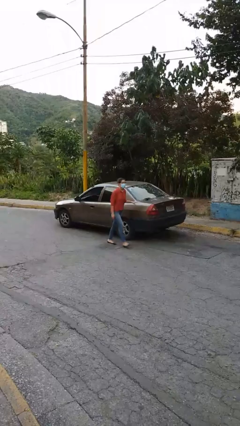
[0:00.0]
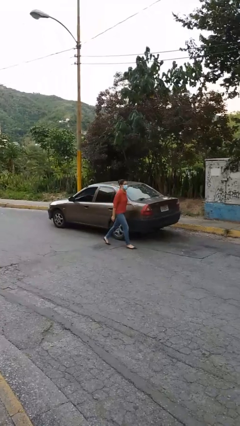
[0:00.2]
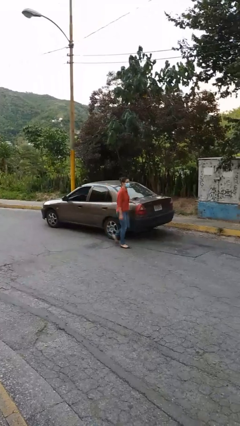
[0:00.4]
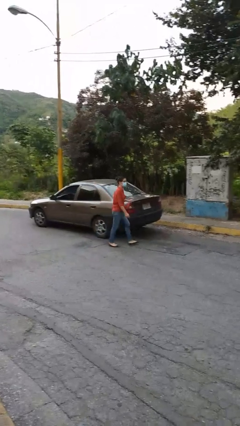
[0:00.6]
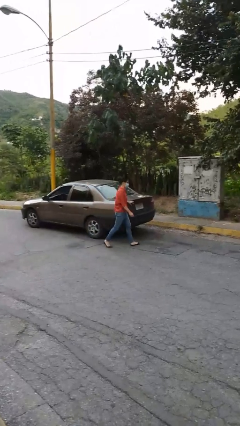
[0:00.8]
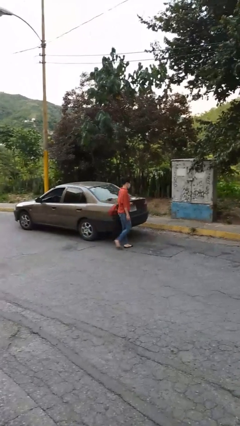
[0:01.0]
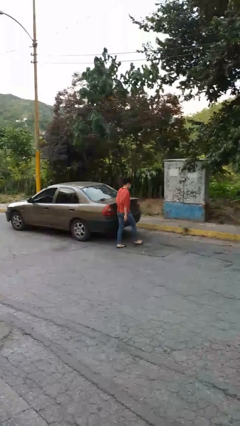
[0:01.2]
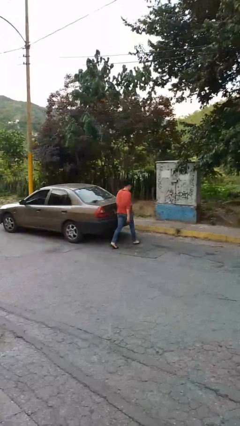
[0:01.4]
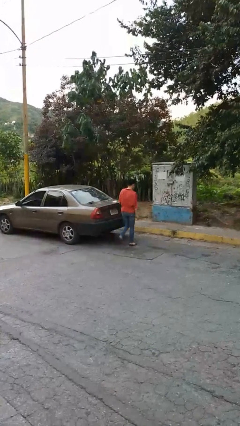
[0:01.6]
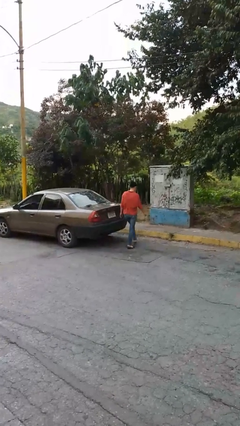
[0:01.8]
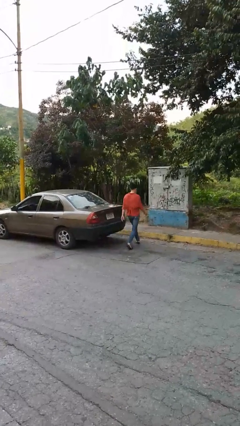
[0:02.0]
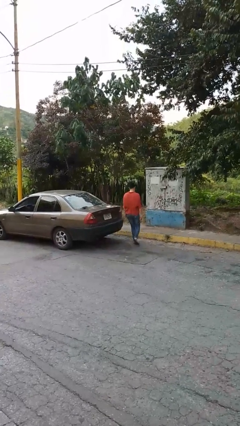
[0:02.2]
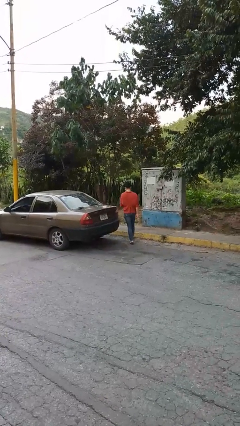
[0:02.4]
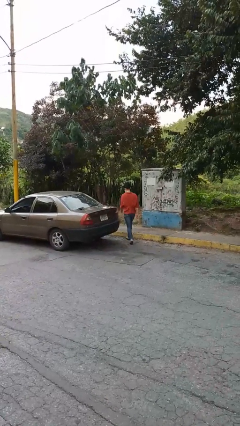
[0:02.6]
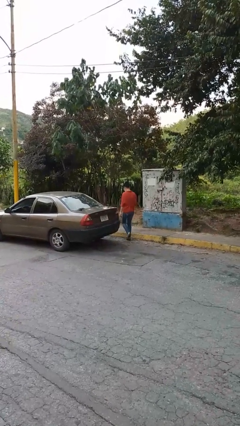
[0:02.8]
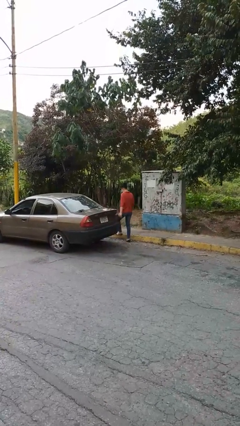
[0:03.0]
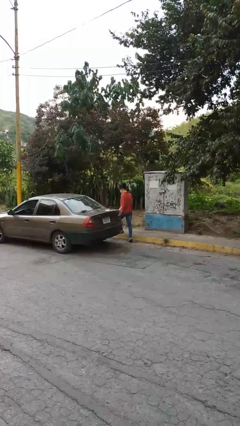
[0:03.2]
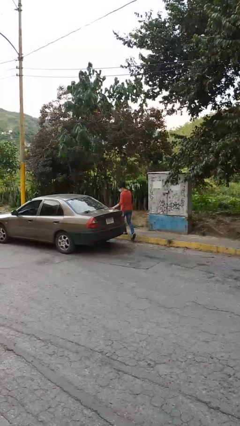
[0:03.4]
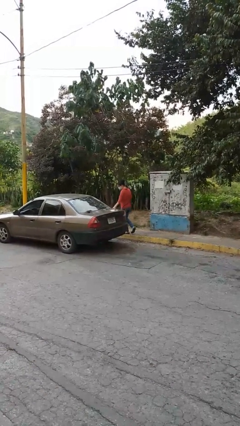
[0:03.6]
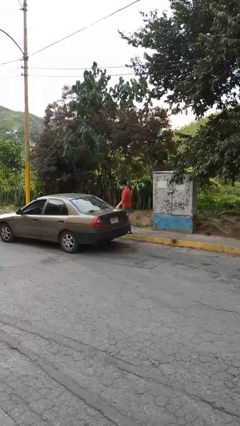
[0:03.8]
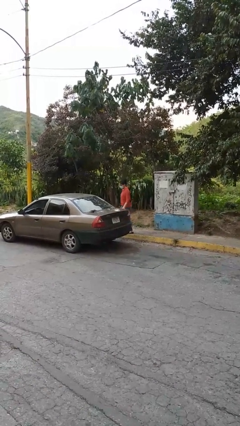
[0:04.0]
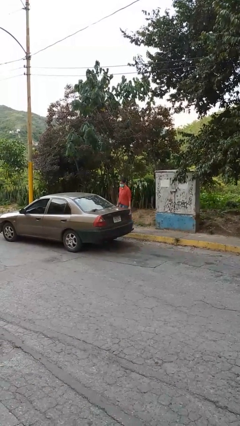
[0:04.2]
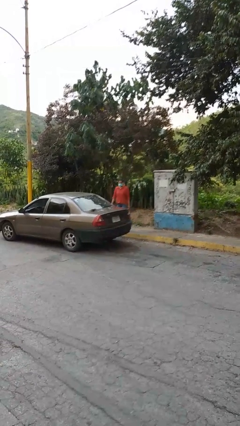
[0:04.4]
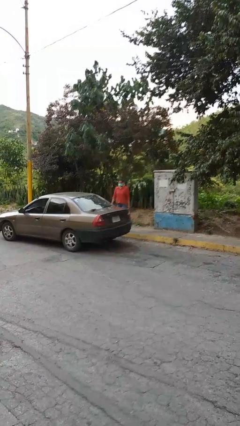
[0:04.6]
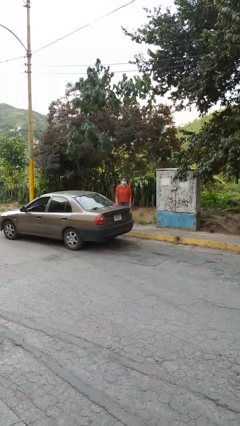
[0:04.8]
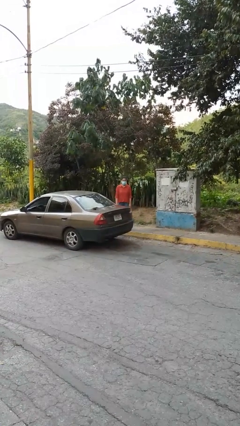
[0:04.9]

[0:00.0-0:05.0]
person walks around car

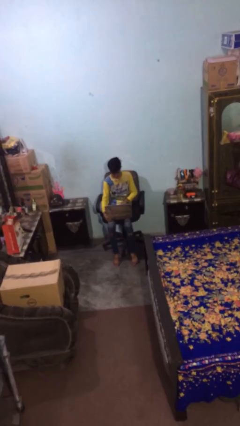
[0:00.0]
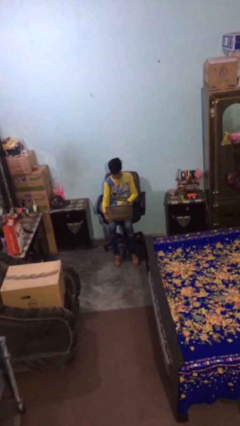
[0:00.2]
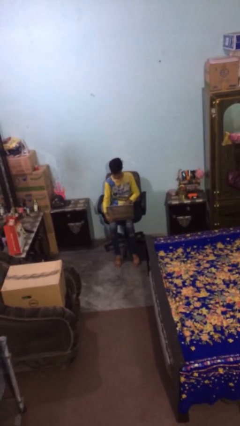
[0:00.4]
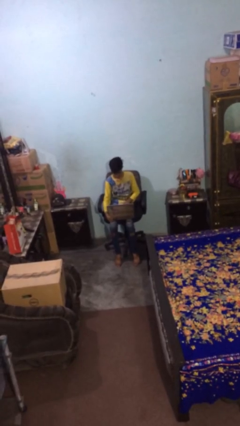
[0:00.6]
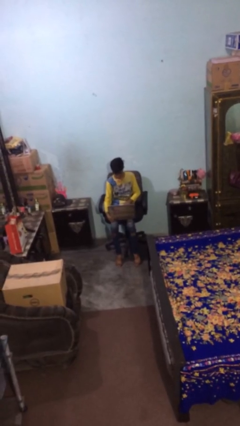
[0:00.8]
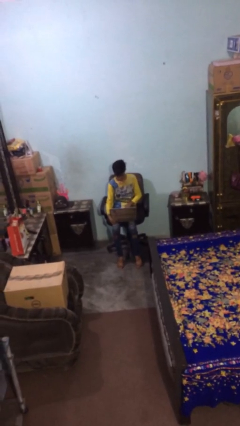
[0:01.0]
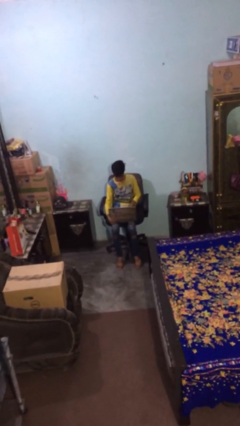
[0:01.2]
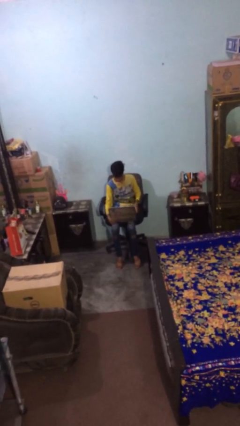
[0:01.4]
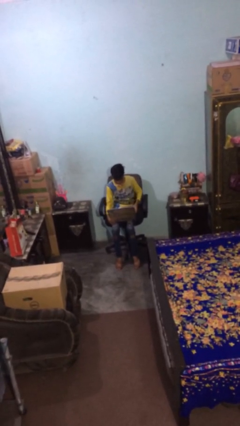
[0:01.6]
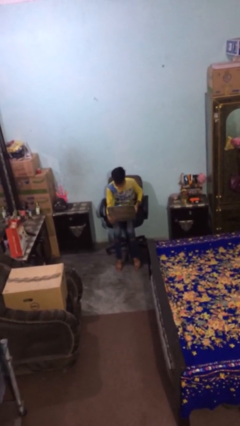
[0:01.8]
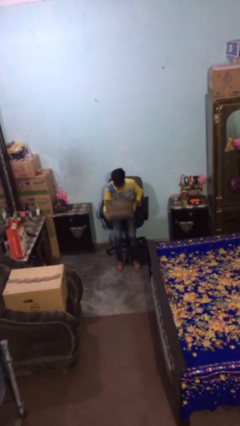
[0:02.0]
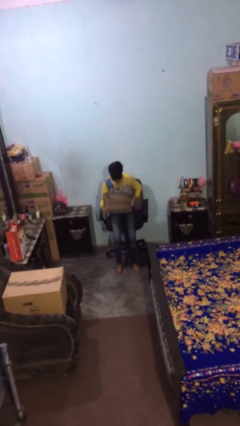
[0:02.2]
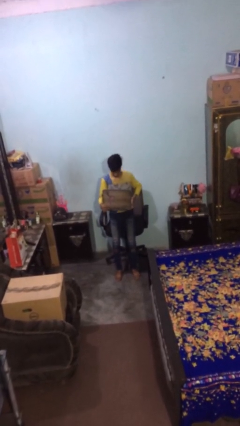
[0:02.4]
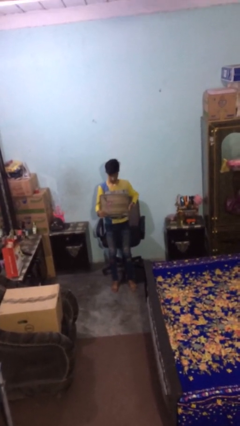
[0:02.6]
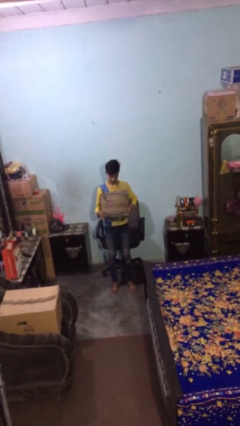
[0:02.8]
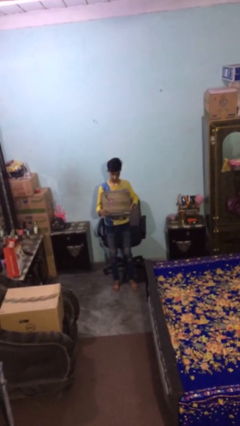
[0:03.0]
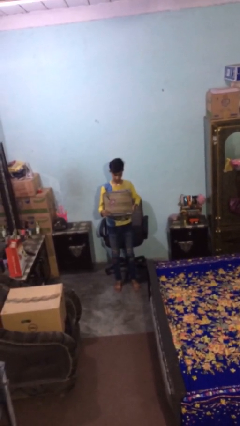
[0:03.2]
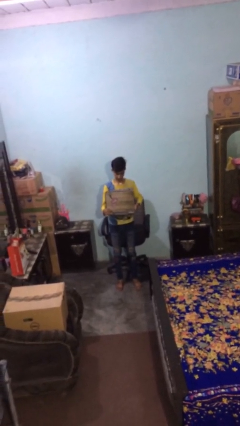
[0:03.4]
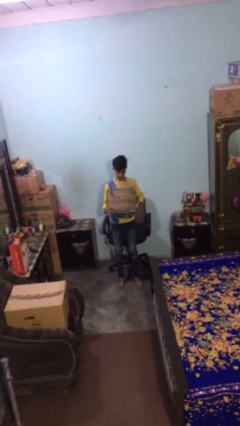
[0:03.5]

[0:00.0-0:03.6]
person stands up

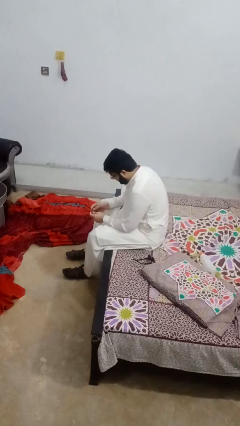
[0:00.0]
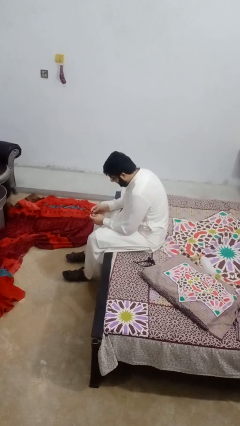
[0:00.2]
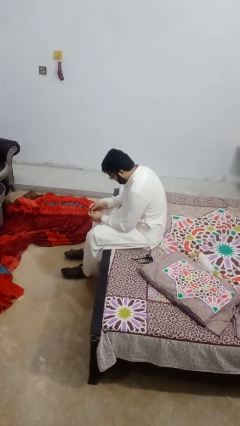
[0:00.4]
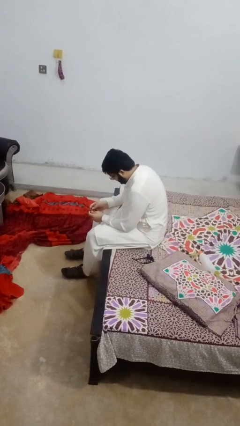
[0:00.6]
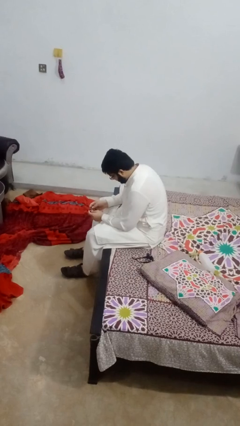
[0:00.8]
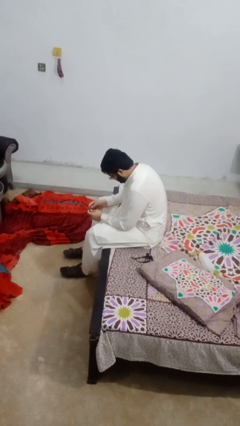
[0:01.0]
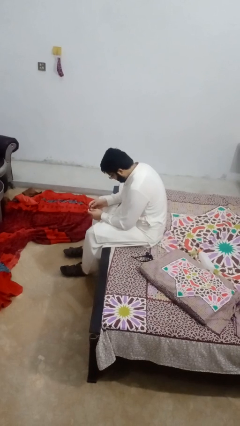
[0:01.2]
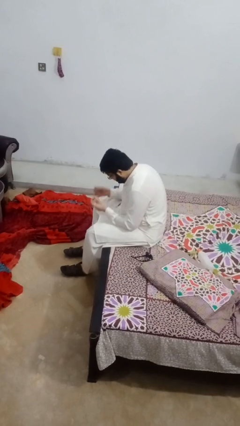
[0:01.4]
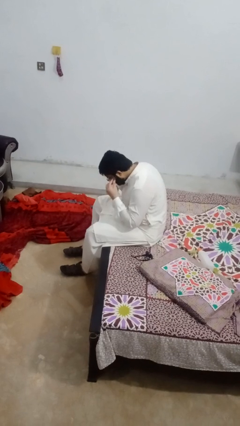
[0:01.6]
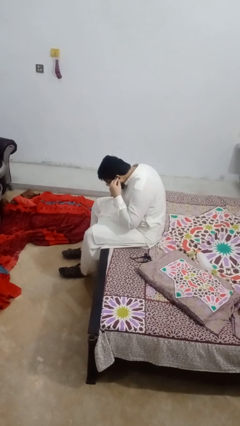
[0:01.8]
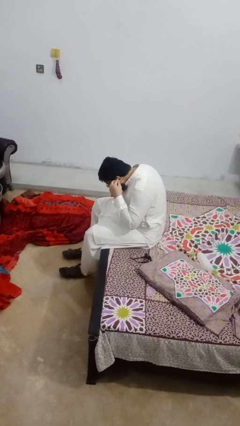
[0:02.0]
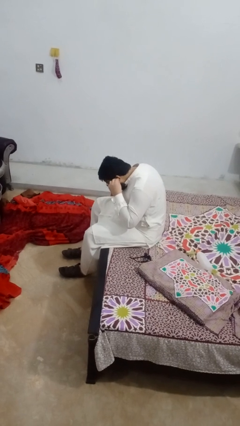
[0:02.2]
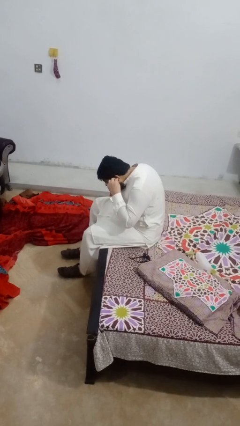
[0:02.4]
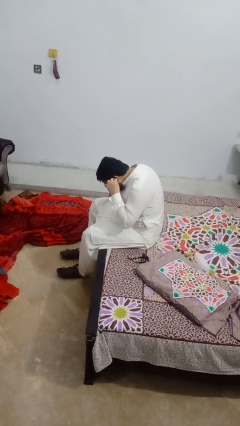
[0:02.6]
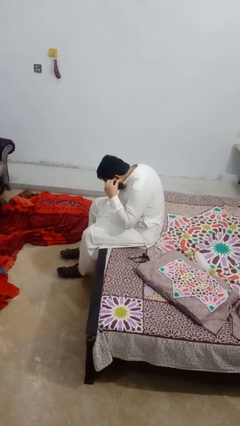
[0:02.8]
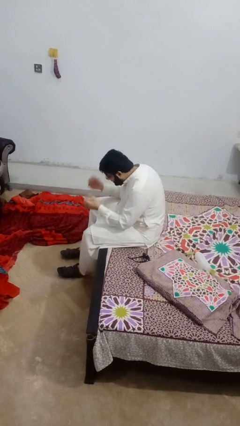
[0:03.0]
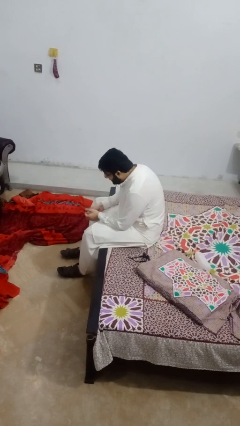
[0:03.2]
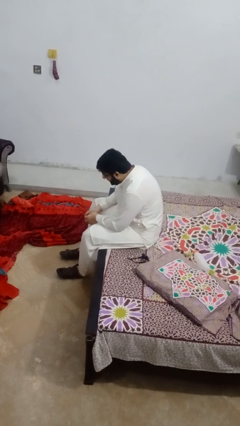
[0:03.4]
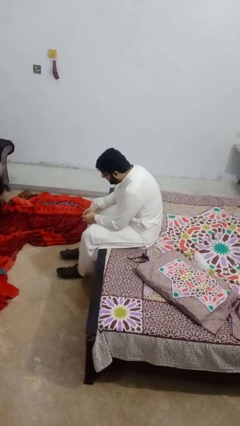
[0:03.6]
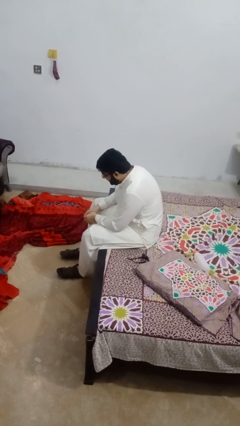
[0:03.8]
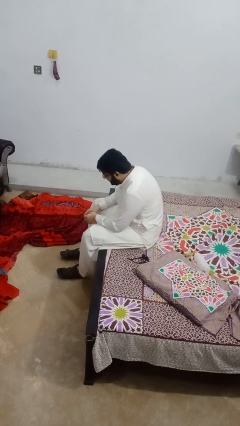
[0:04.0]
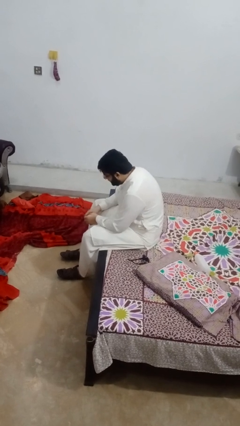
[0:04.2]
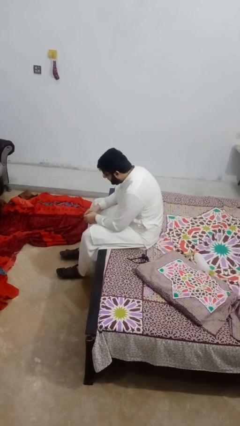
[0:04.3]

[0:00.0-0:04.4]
person puts on headphones

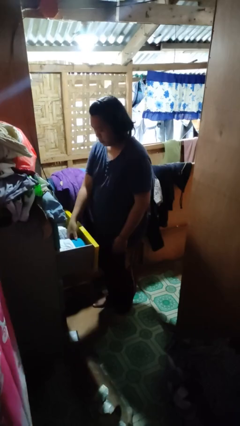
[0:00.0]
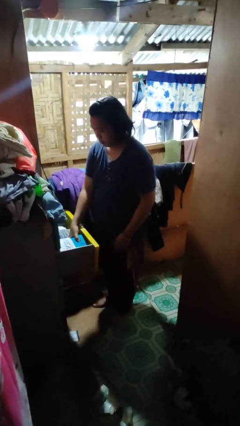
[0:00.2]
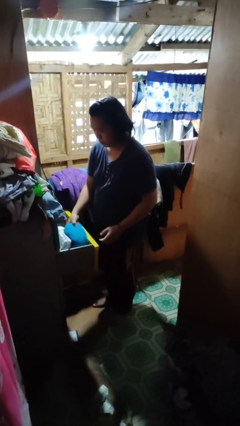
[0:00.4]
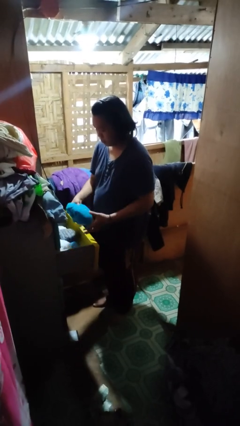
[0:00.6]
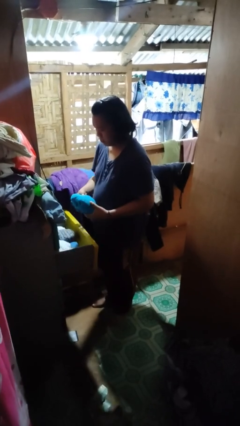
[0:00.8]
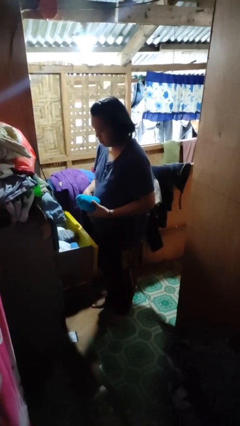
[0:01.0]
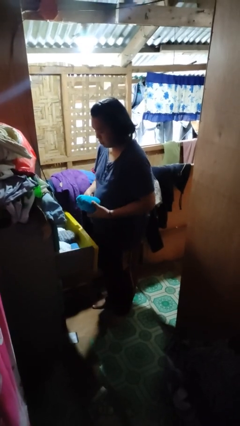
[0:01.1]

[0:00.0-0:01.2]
person takes clothes from dresser

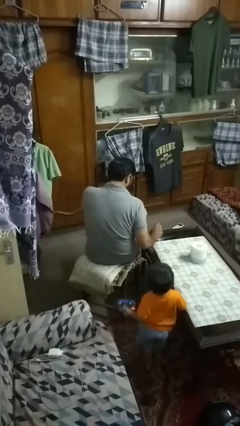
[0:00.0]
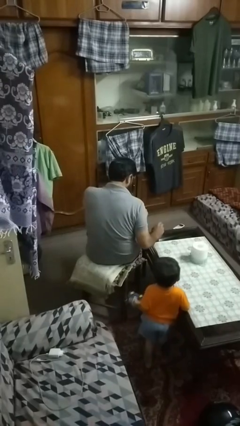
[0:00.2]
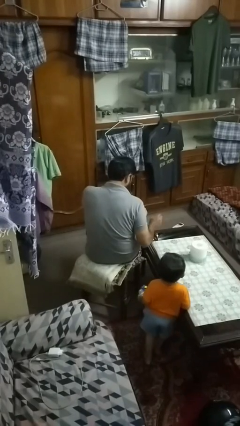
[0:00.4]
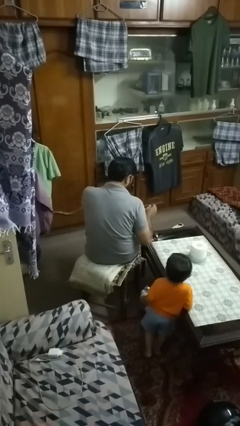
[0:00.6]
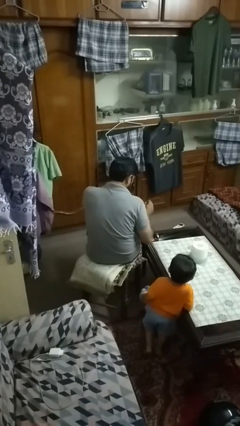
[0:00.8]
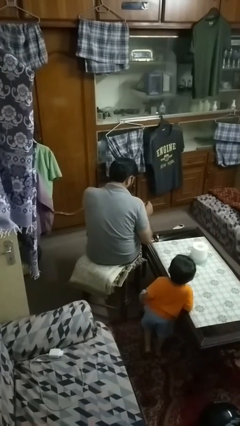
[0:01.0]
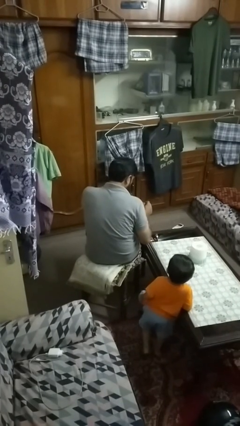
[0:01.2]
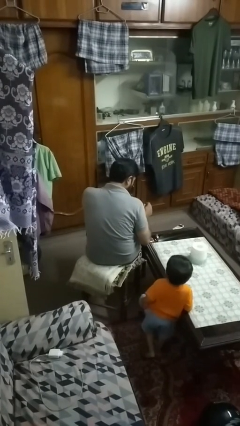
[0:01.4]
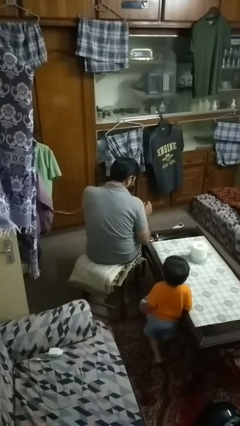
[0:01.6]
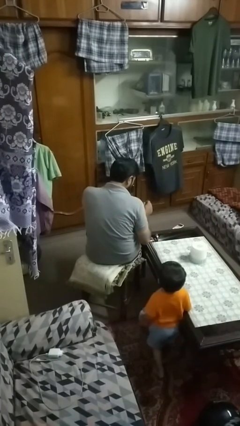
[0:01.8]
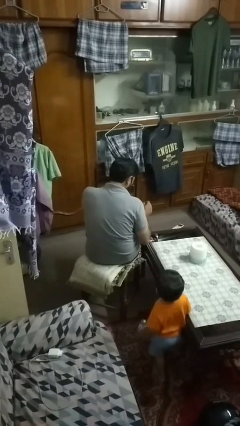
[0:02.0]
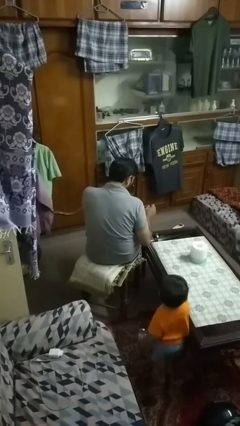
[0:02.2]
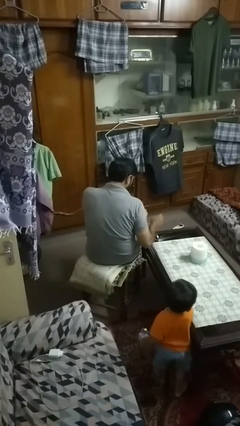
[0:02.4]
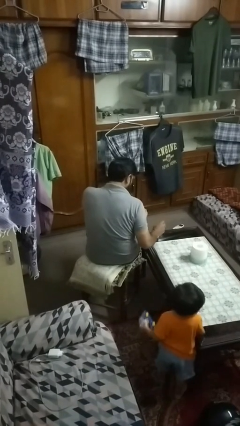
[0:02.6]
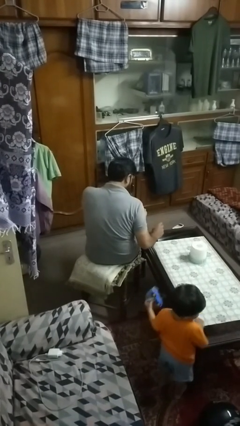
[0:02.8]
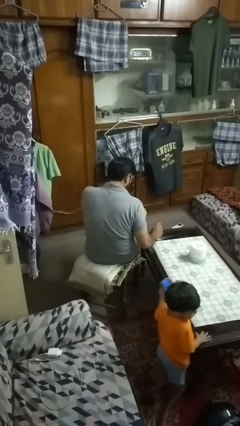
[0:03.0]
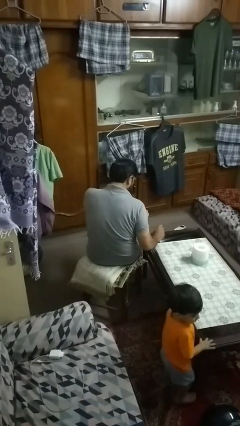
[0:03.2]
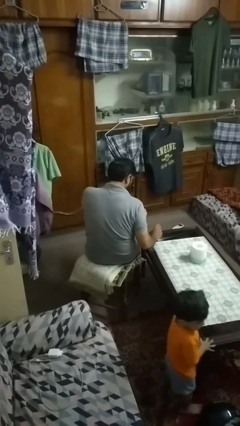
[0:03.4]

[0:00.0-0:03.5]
person paints fingernails
